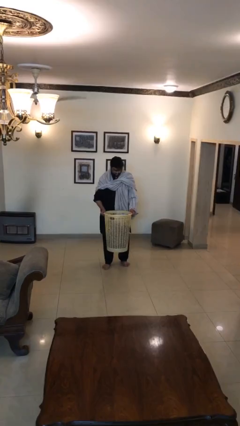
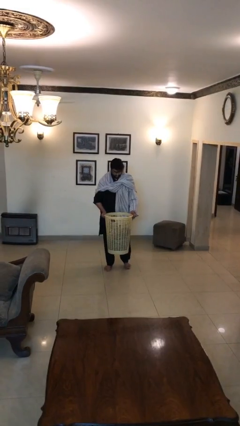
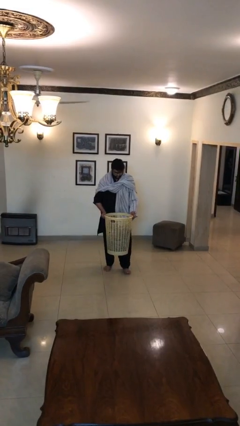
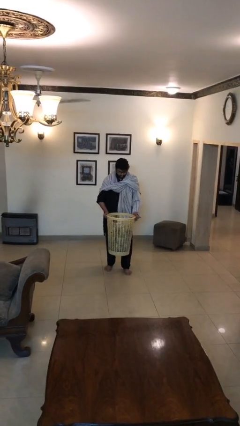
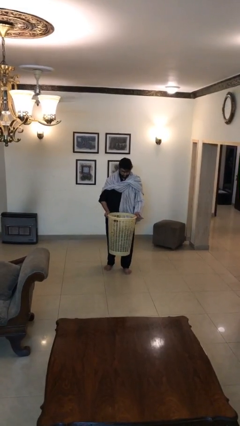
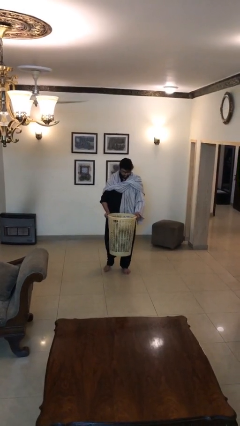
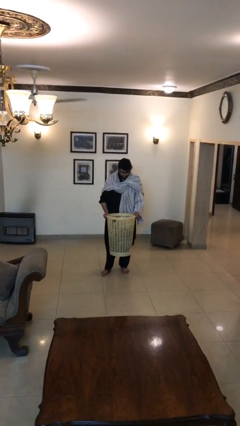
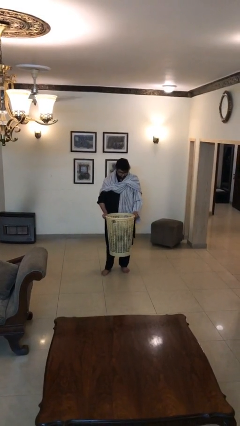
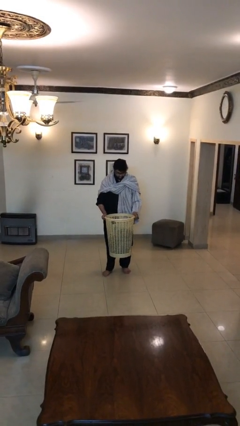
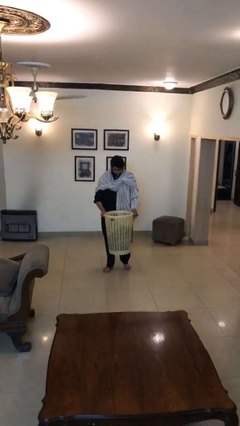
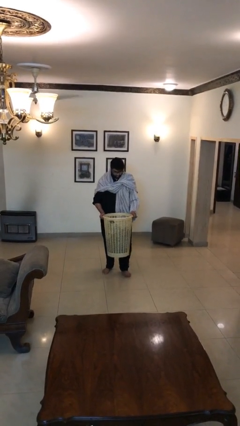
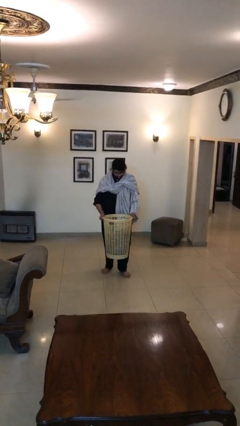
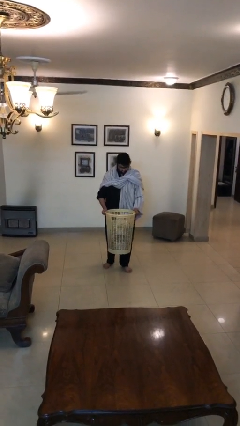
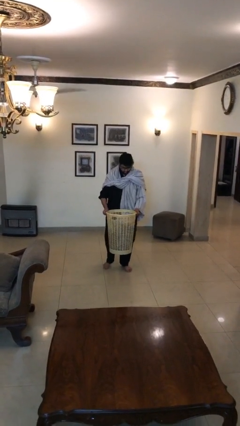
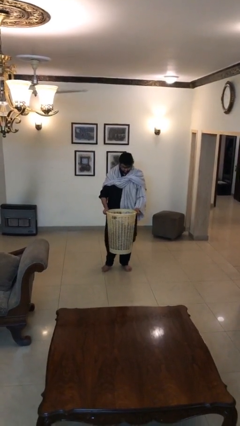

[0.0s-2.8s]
person carries heavy object

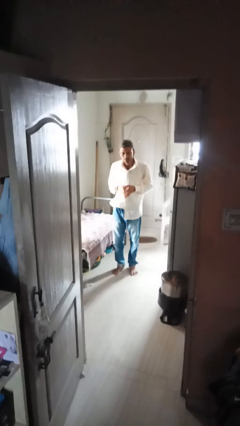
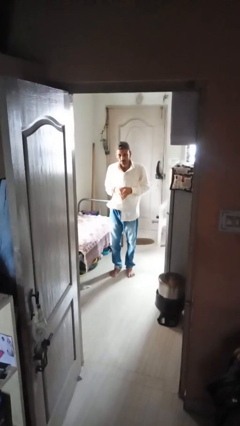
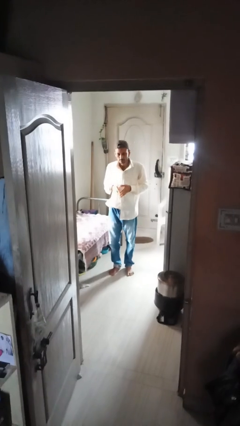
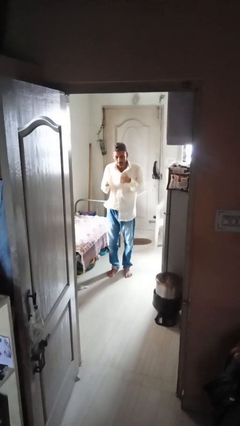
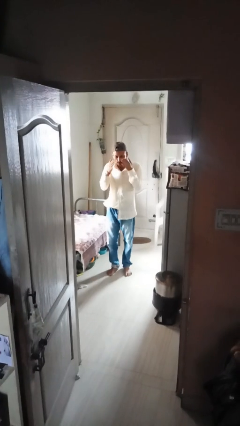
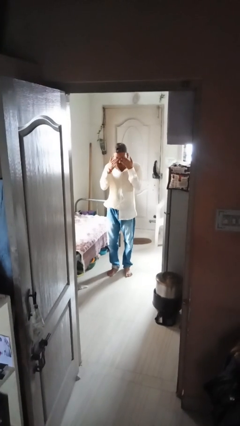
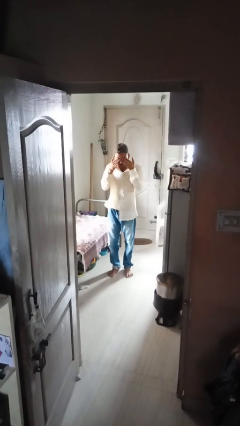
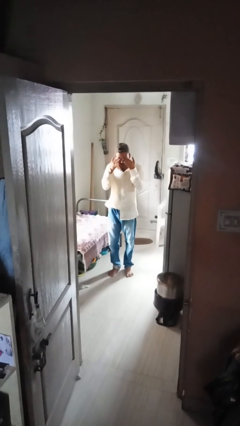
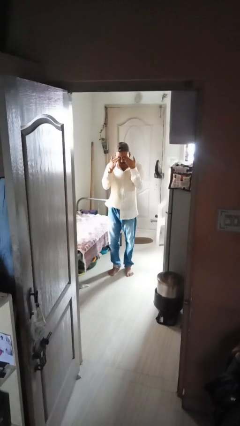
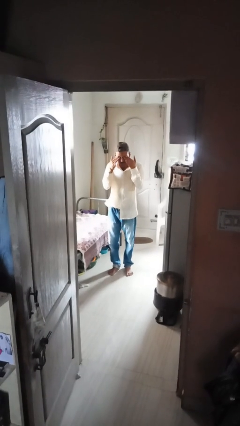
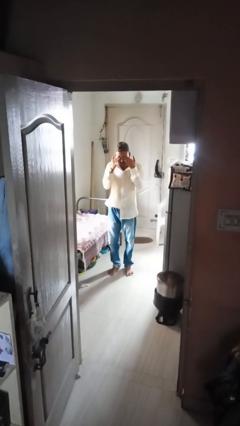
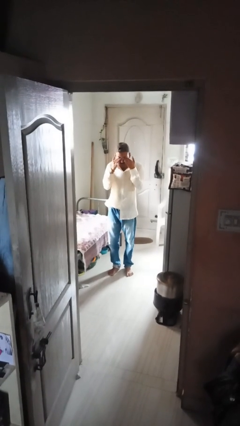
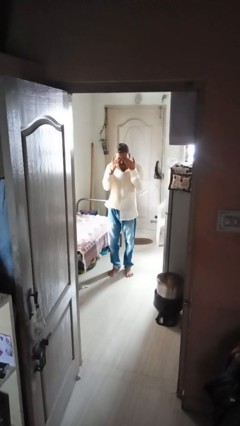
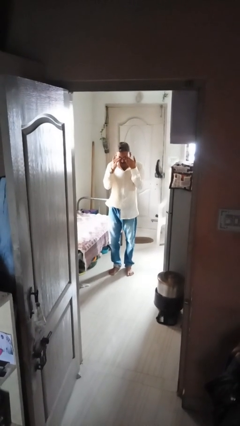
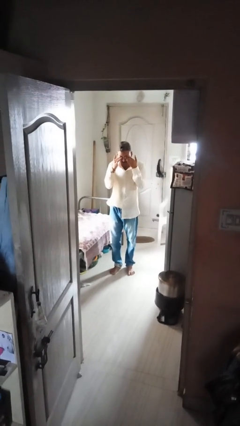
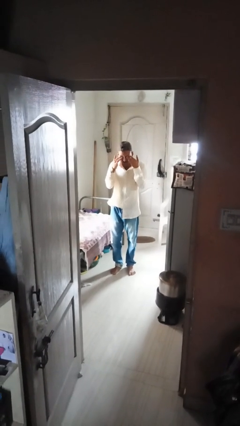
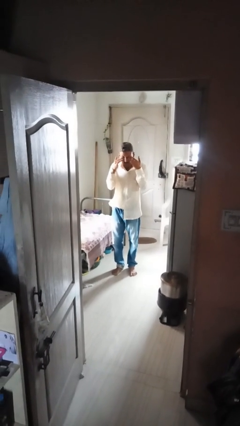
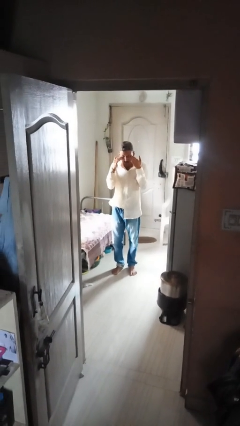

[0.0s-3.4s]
person rubs eyes

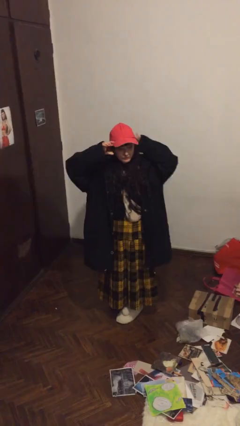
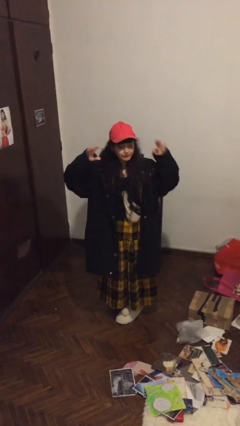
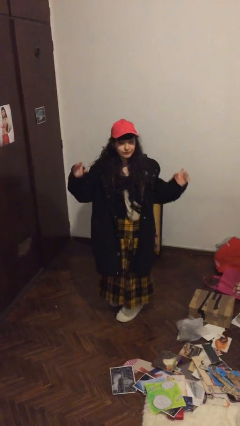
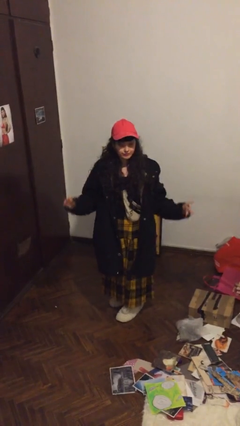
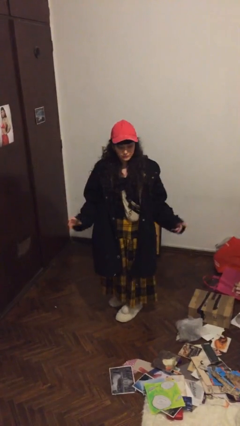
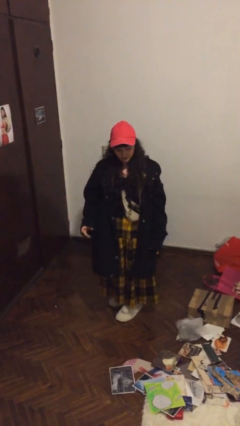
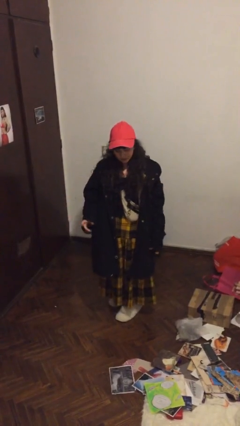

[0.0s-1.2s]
person takes off hat

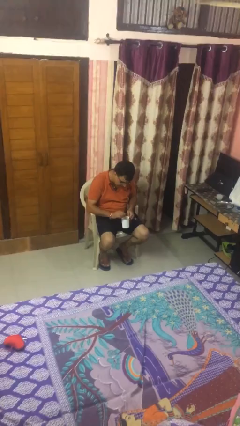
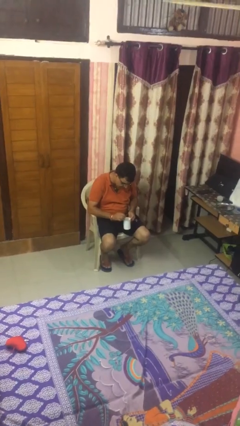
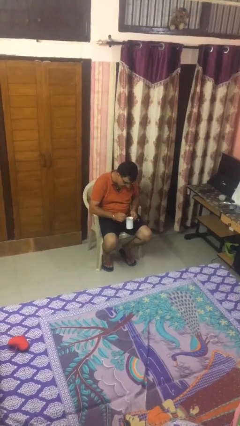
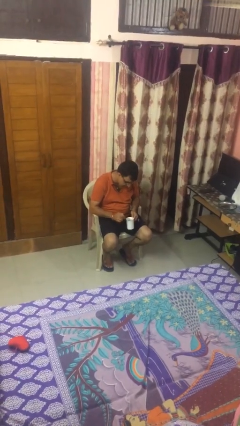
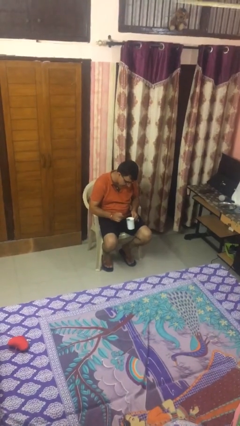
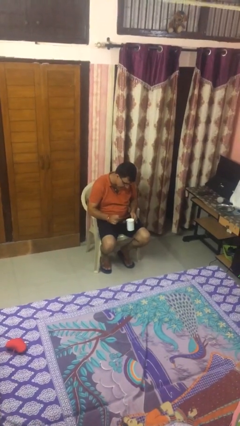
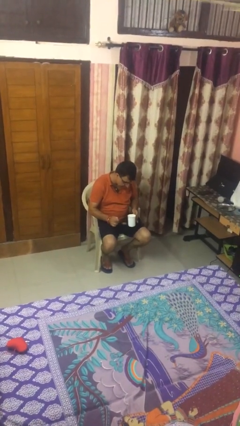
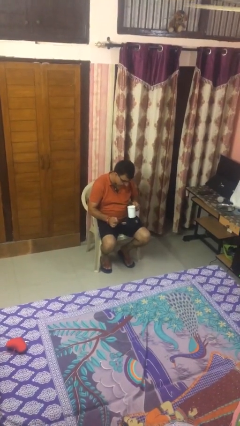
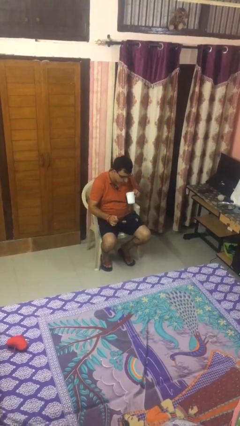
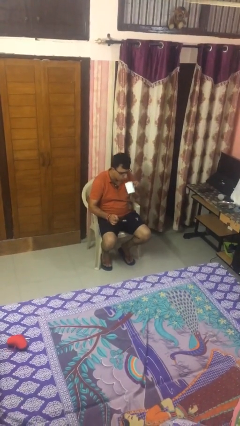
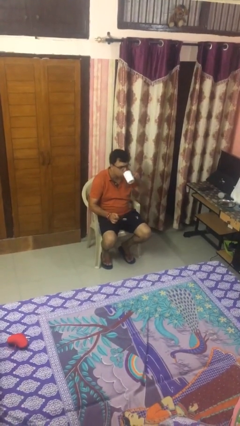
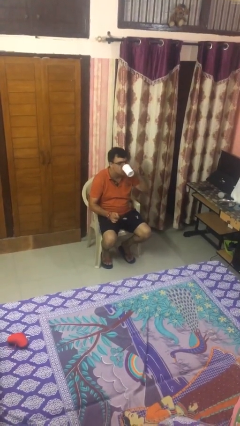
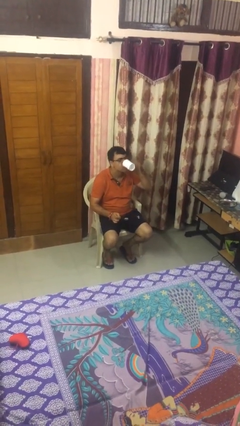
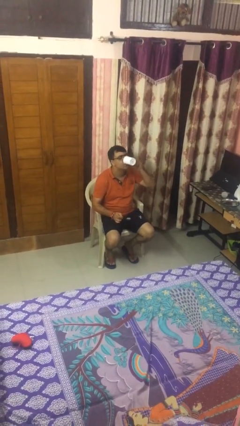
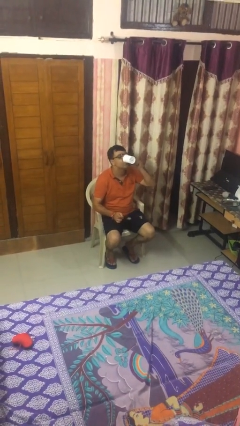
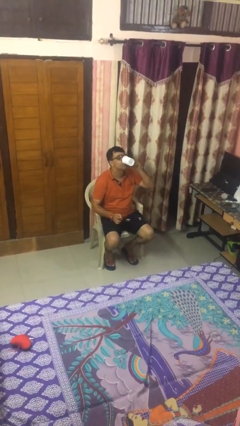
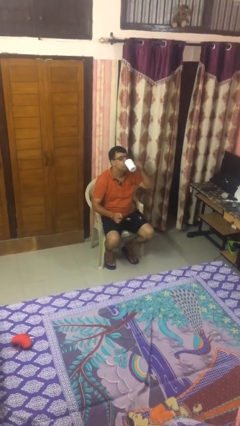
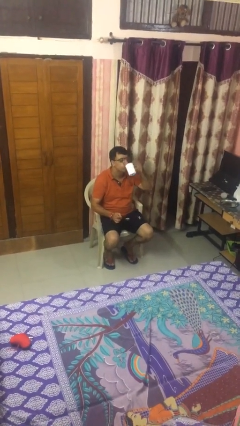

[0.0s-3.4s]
person drinks from mug

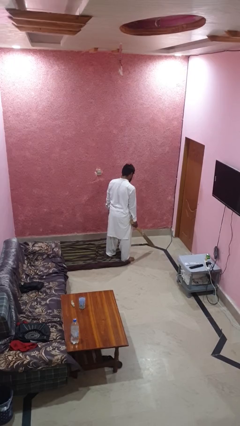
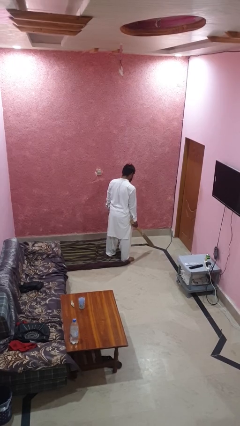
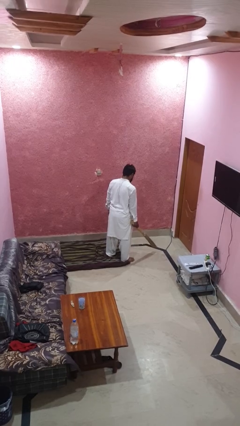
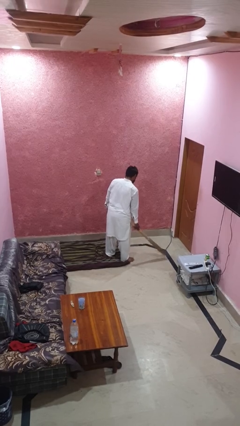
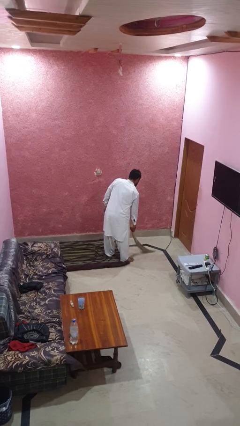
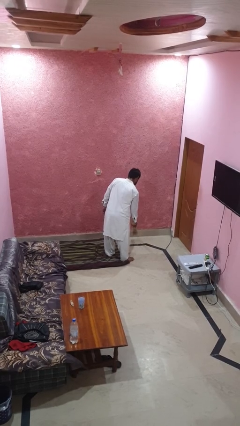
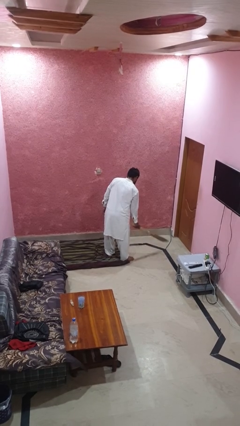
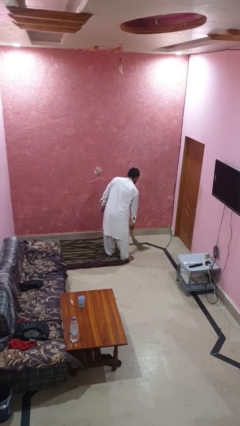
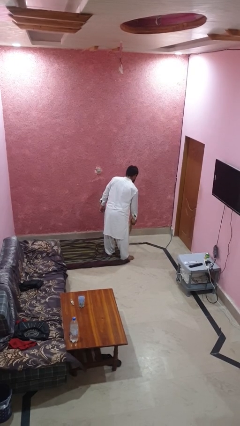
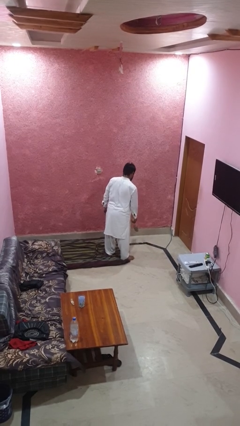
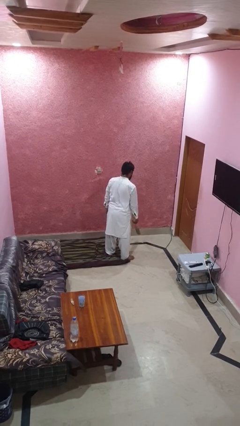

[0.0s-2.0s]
person sweeps floor

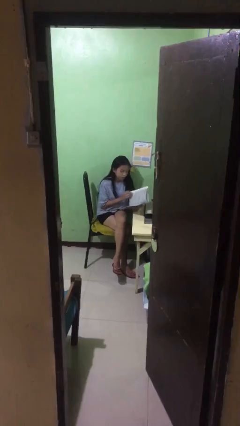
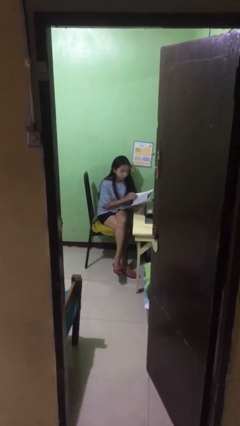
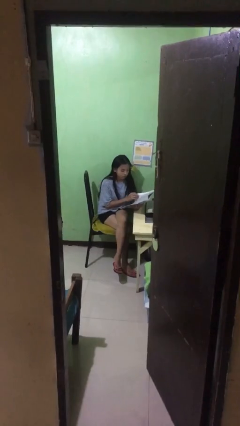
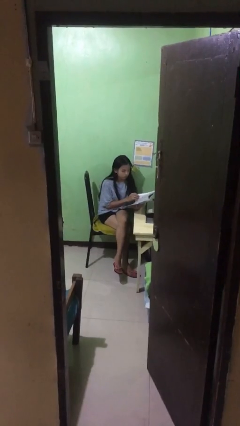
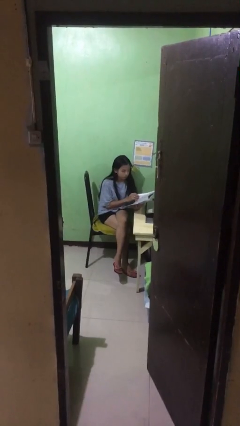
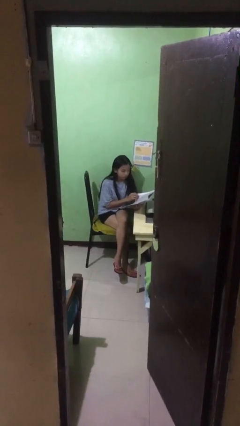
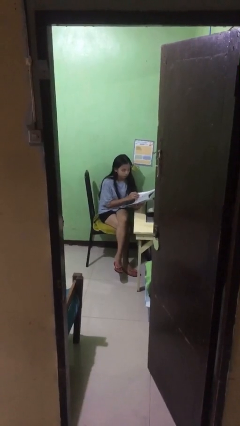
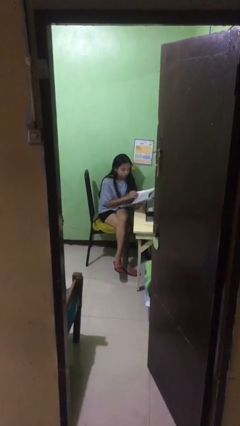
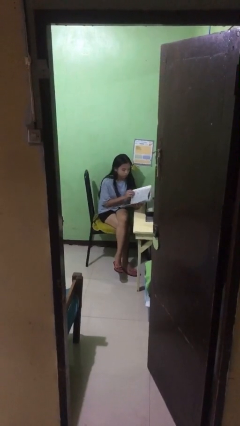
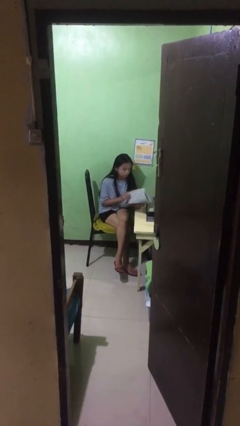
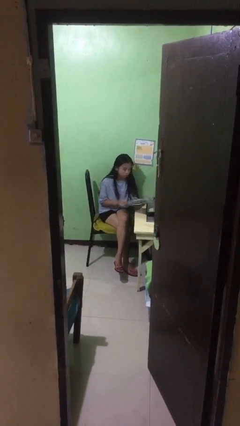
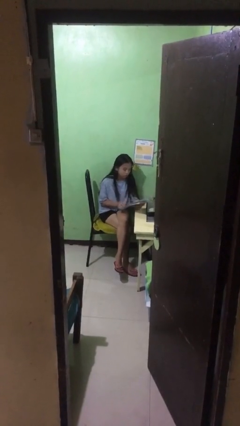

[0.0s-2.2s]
person reads document

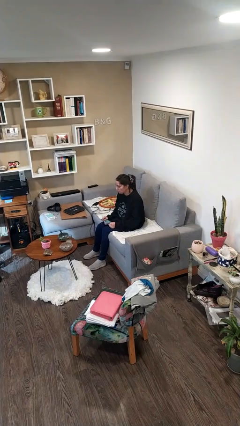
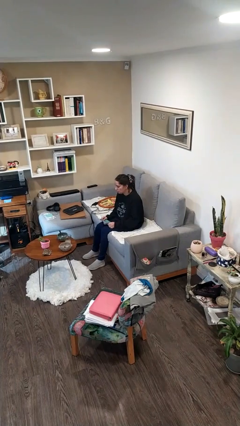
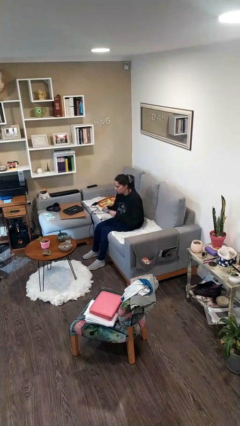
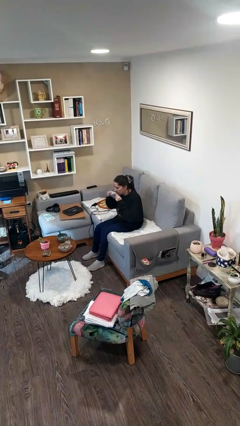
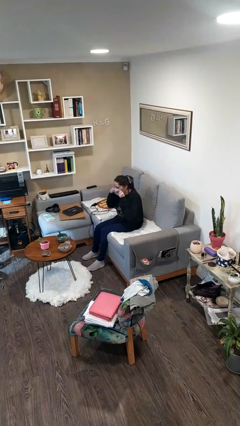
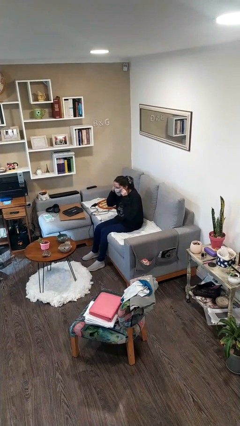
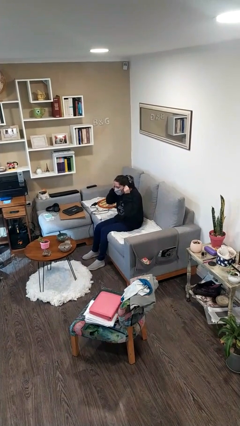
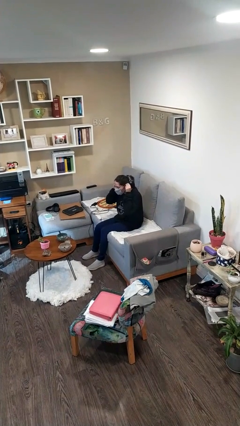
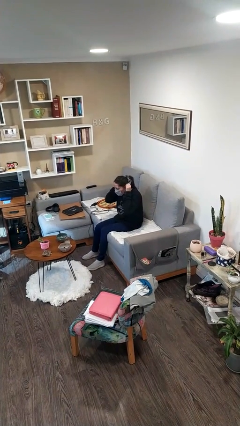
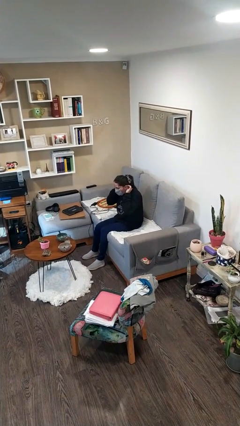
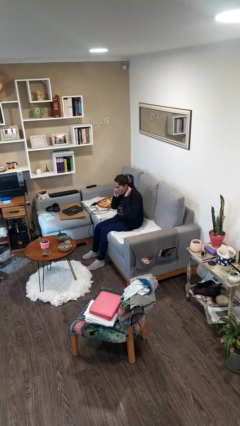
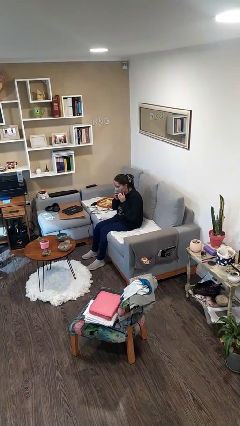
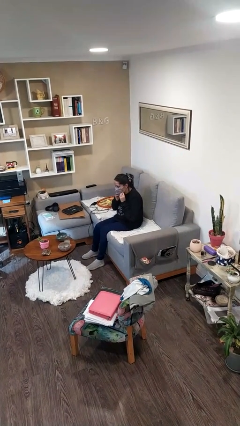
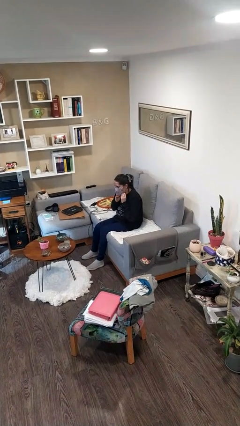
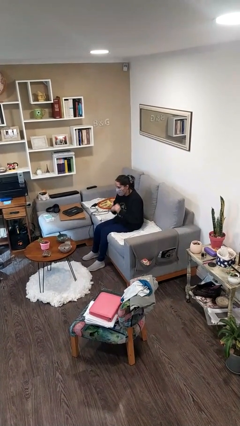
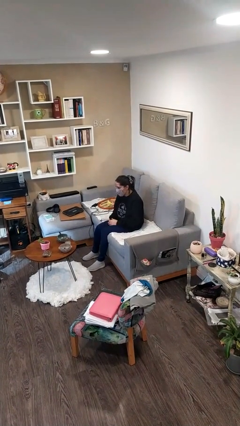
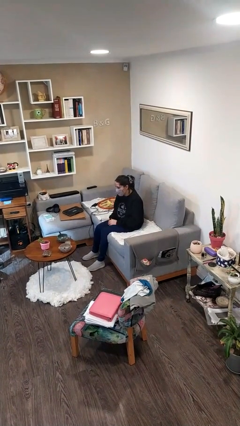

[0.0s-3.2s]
person puts on facemask
